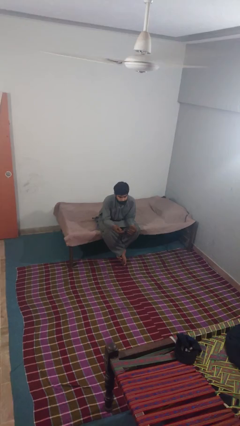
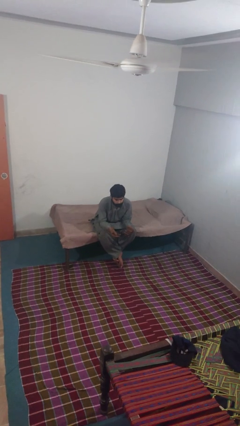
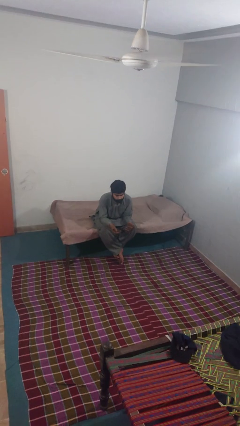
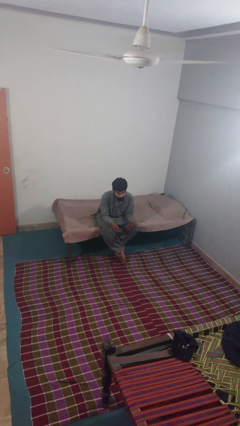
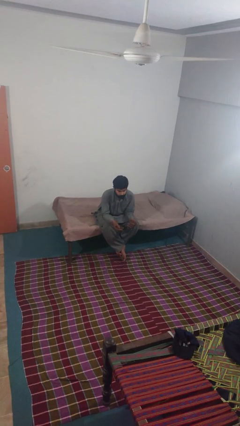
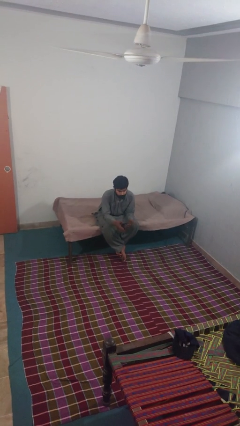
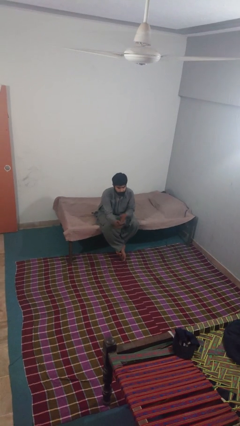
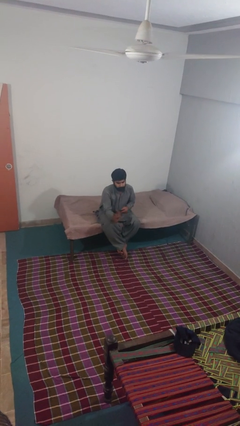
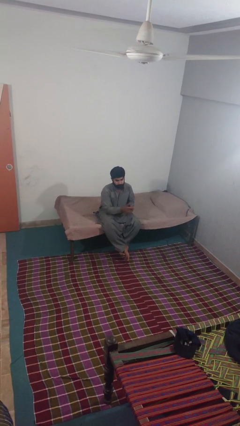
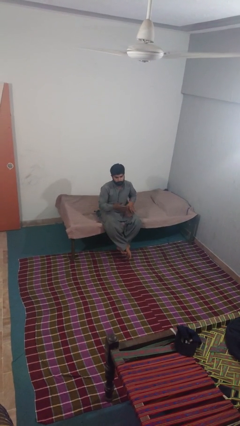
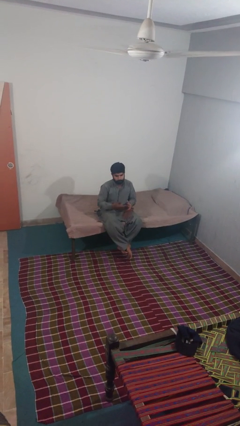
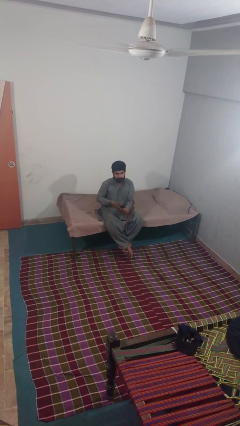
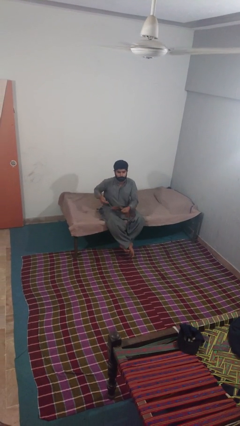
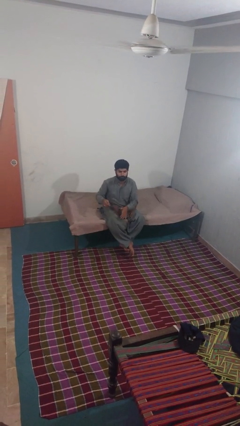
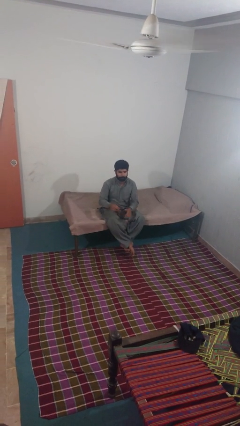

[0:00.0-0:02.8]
person takes off gloves

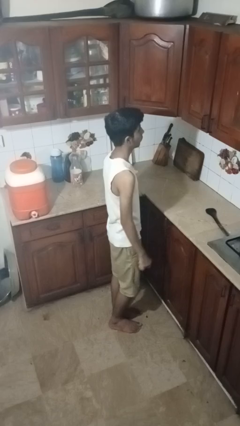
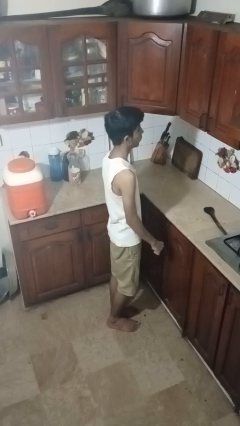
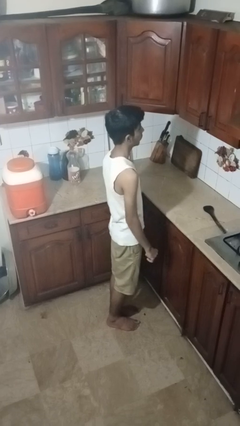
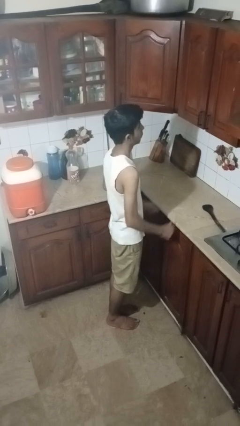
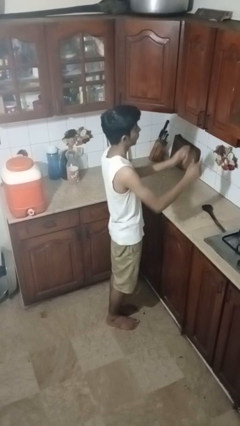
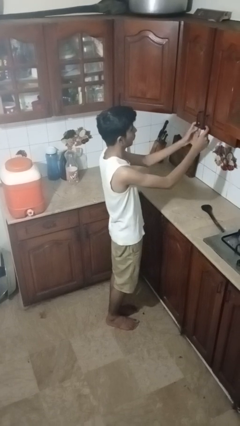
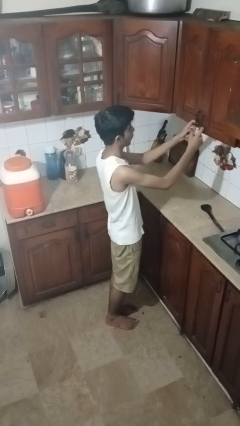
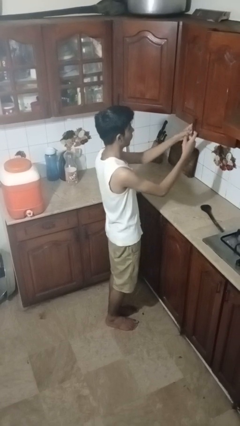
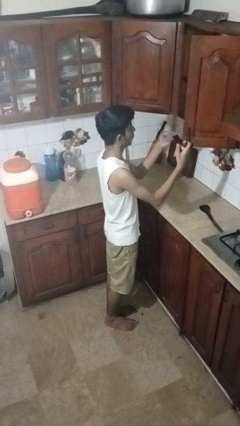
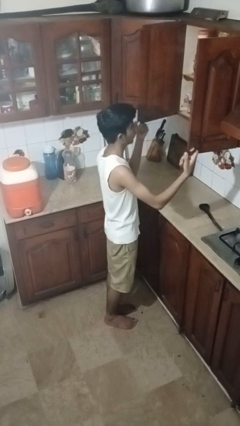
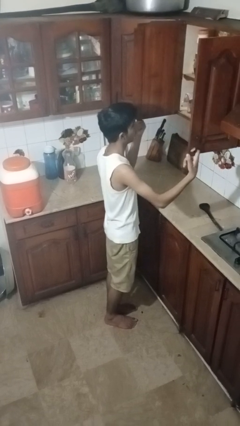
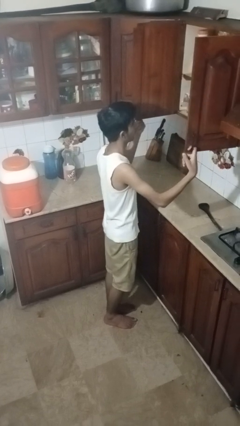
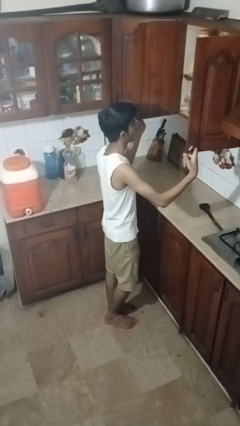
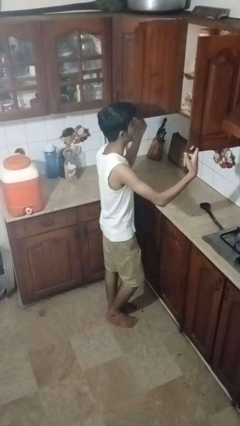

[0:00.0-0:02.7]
person opens cabinet

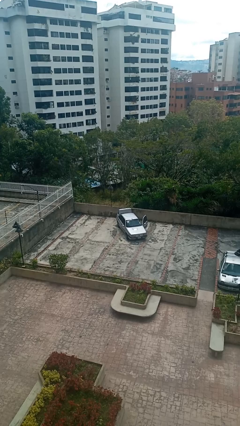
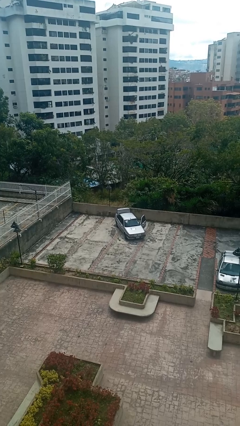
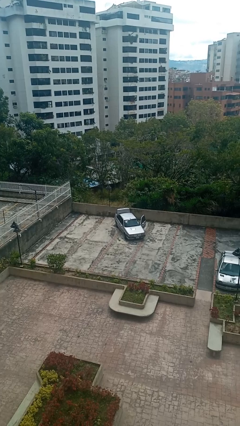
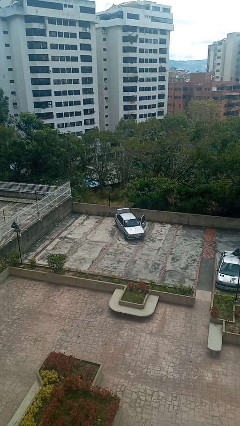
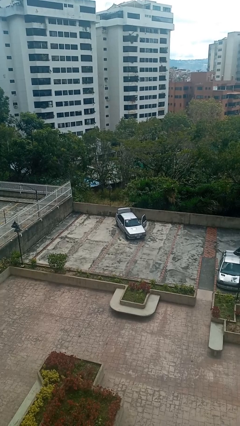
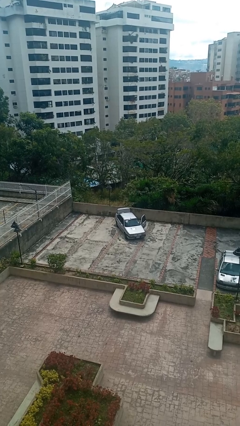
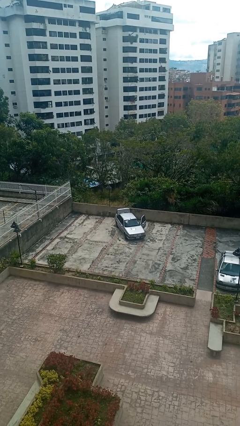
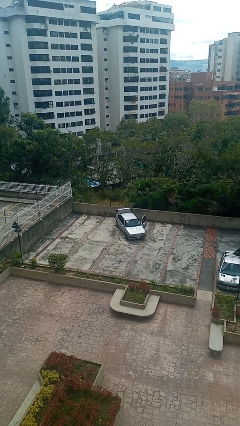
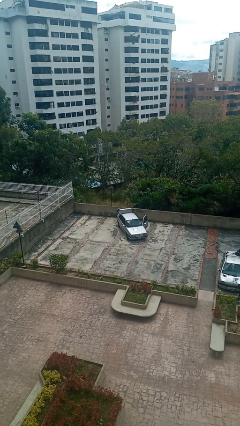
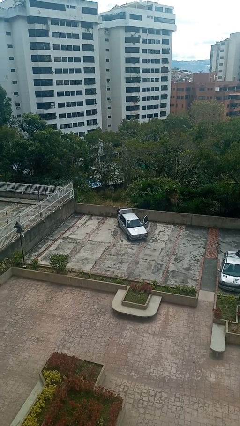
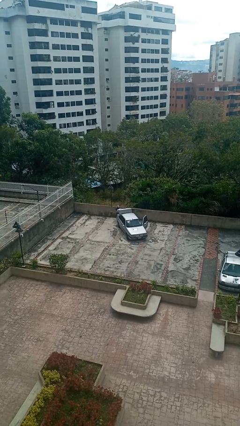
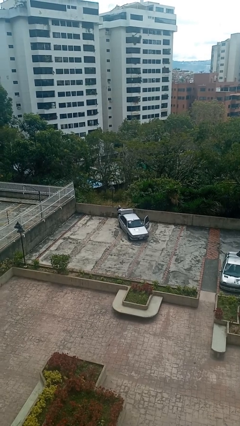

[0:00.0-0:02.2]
person unloads car

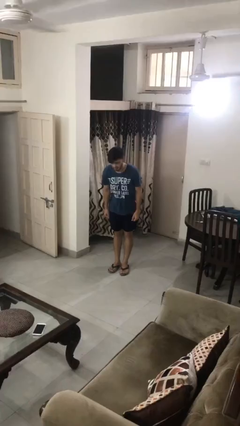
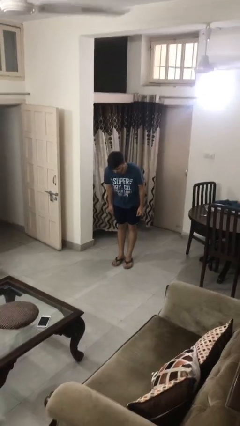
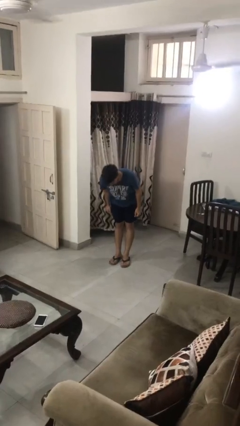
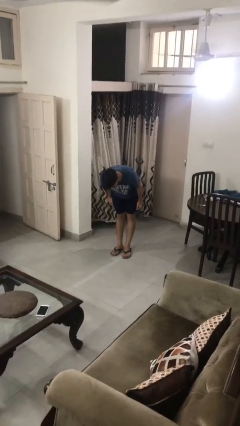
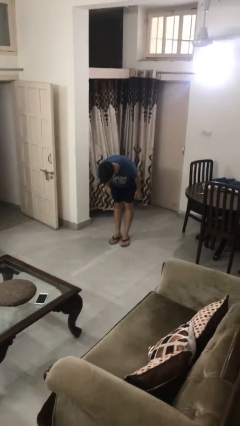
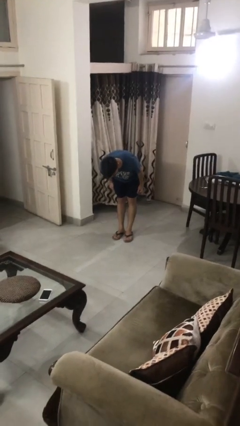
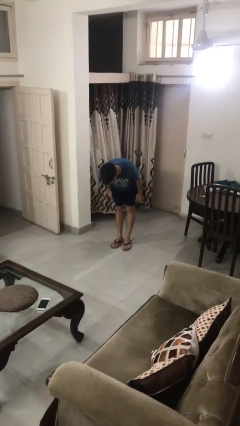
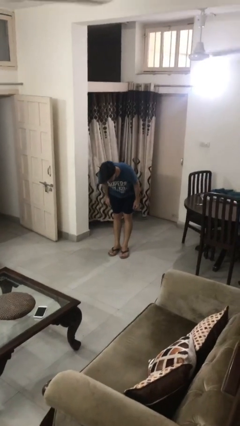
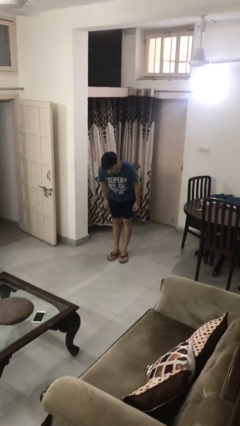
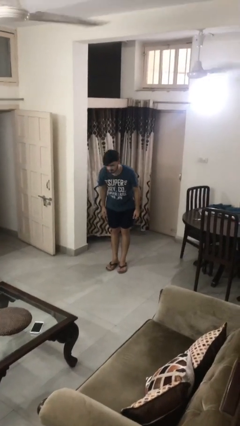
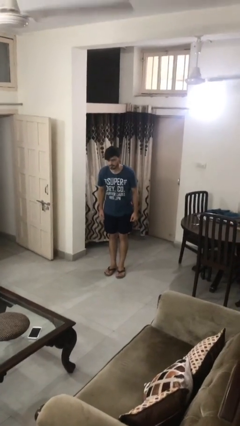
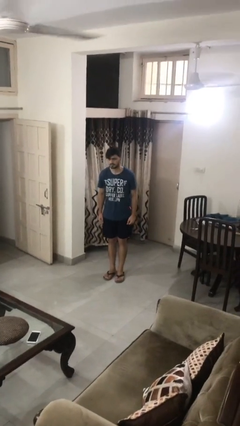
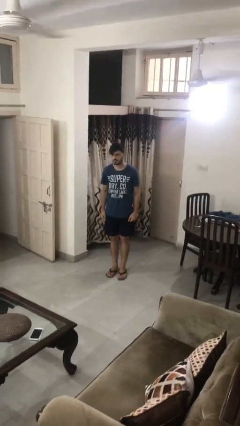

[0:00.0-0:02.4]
person bows

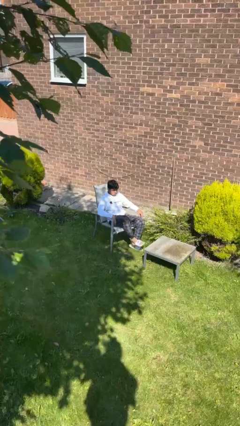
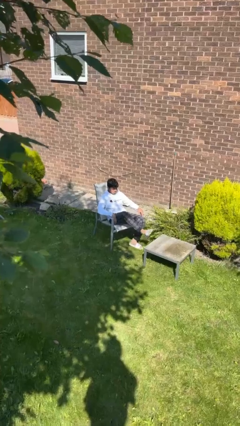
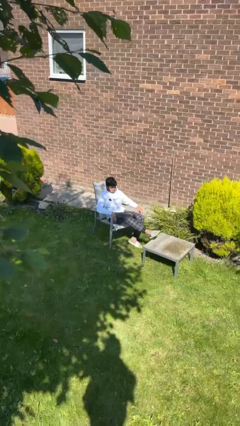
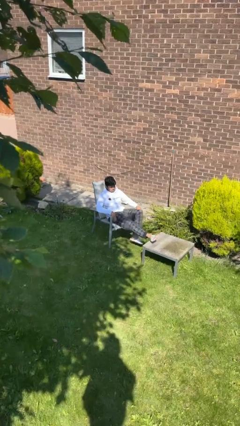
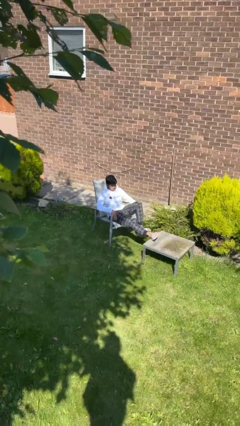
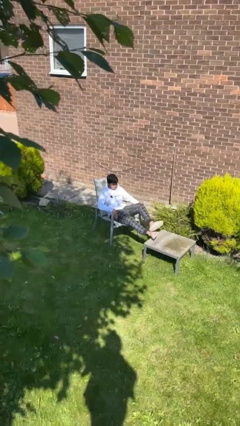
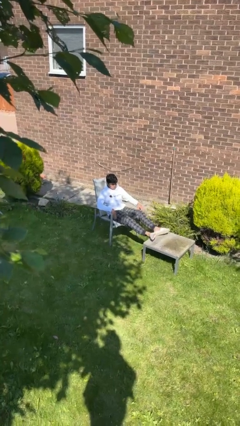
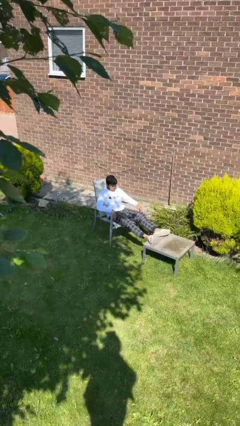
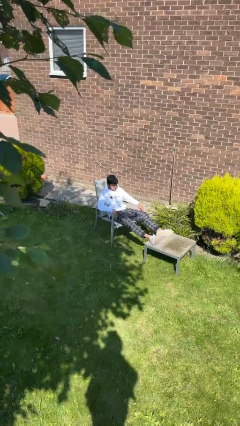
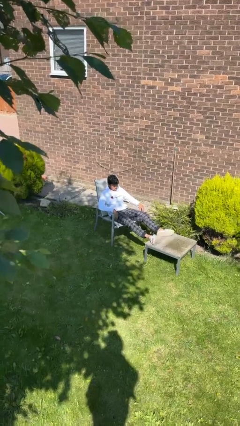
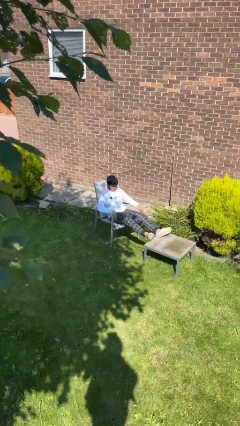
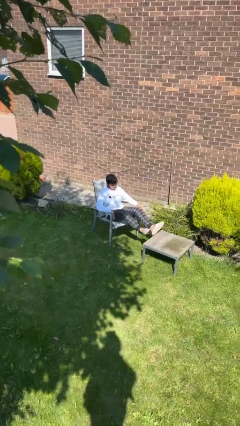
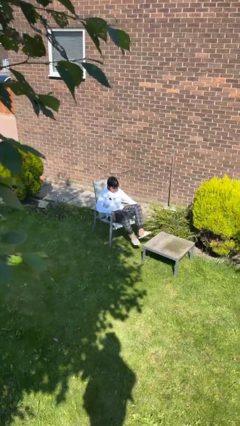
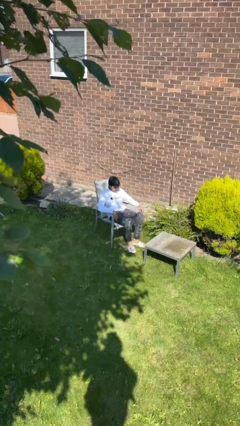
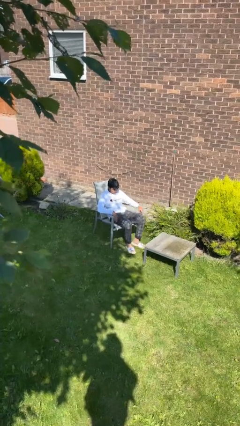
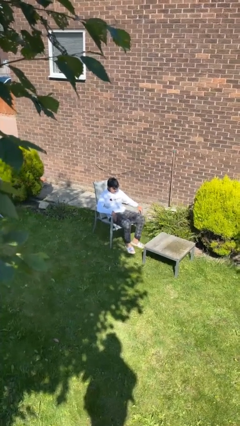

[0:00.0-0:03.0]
person puts feet up

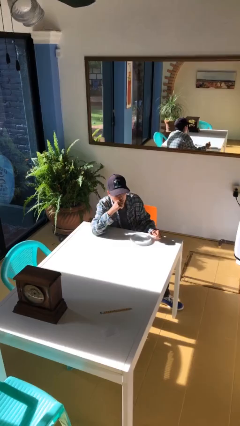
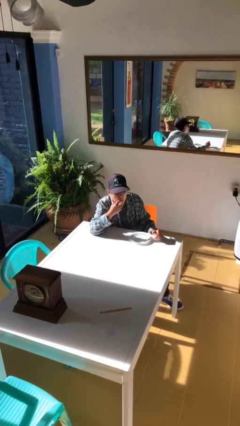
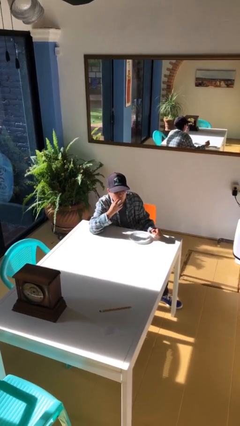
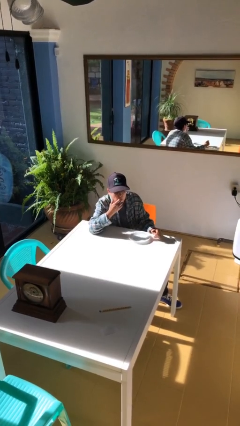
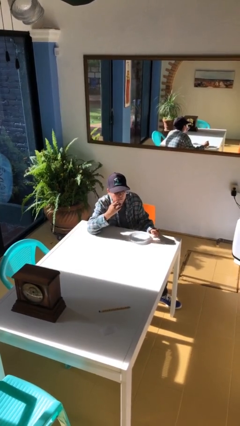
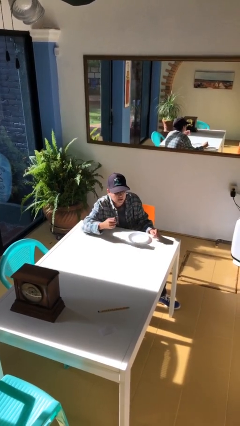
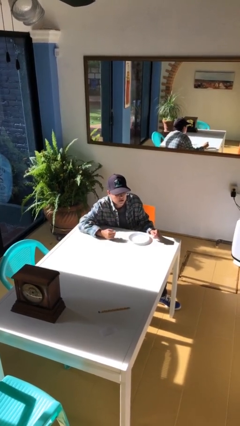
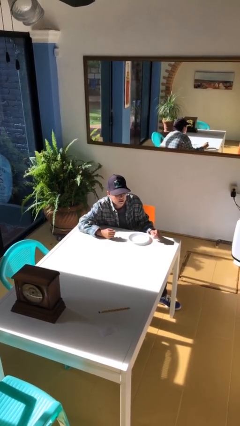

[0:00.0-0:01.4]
person licks fingers

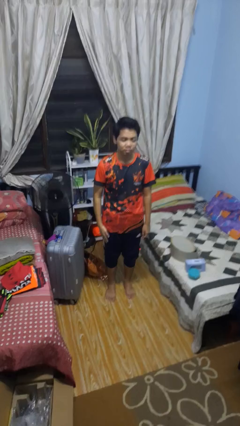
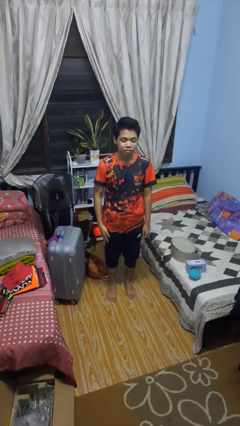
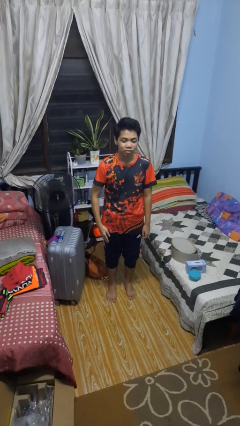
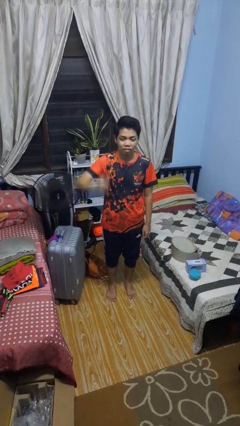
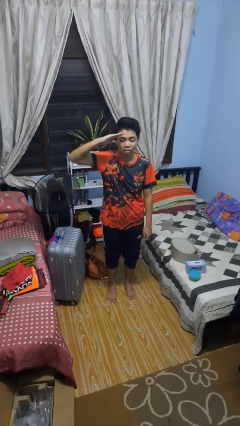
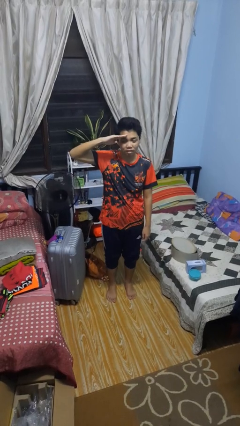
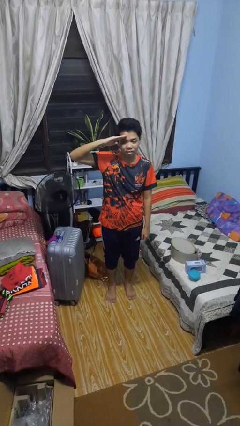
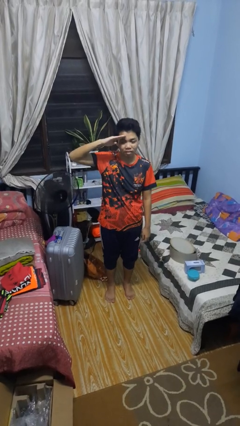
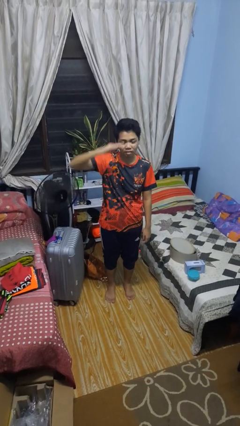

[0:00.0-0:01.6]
person salutes

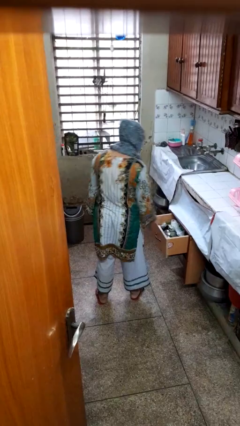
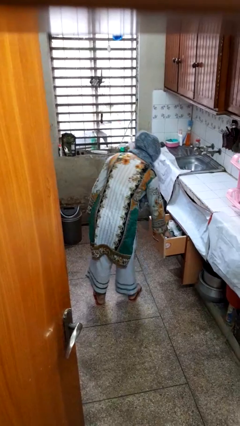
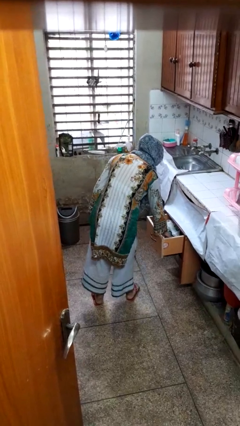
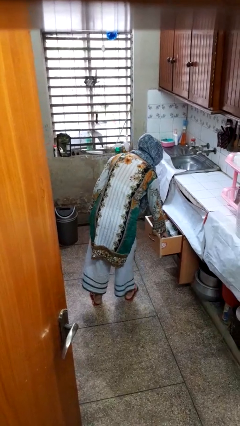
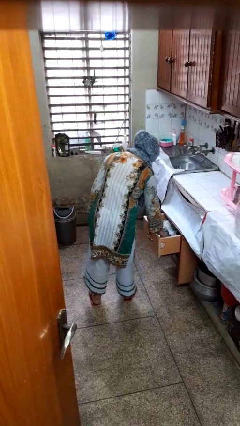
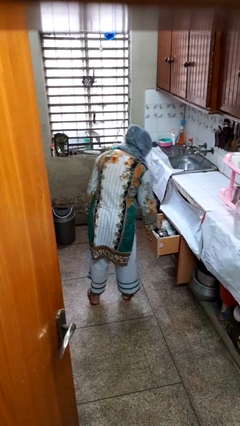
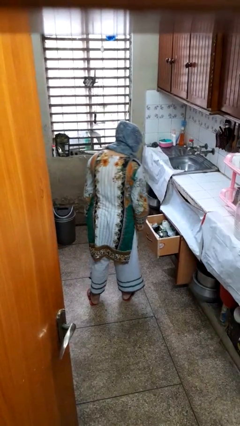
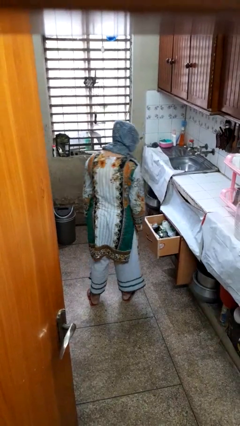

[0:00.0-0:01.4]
person searches in kitchen drawer
